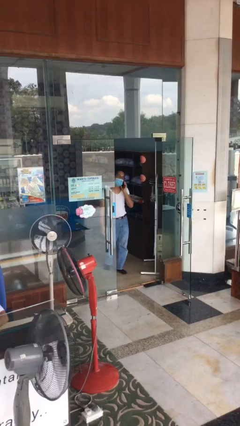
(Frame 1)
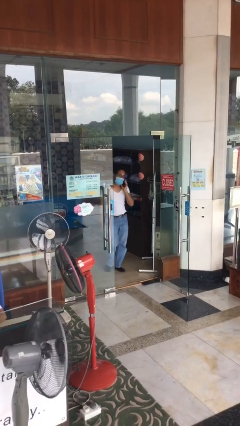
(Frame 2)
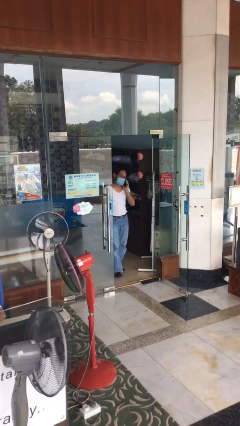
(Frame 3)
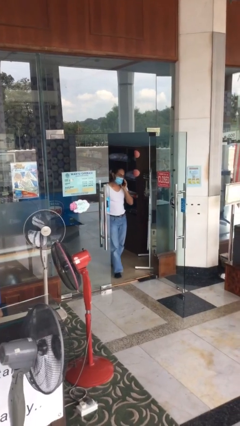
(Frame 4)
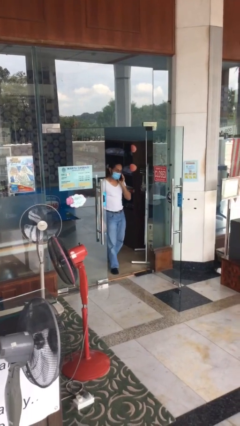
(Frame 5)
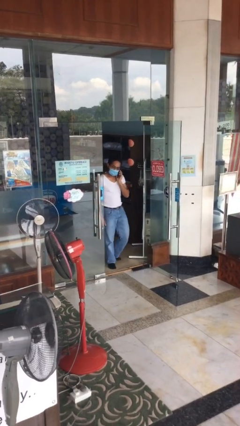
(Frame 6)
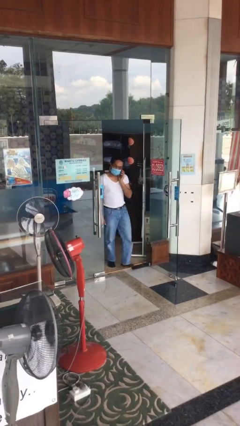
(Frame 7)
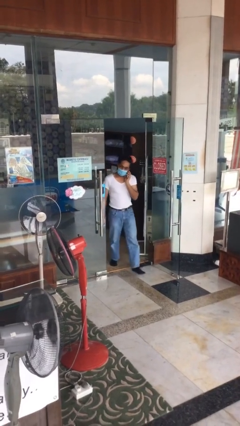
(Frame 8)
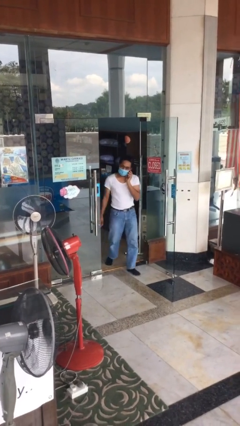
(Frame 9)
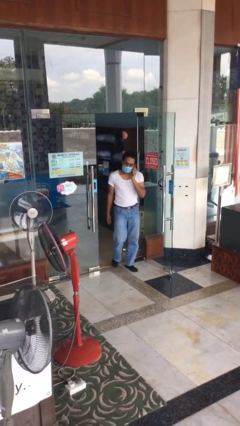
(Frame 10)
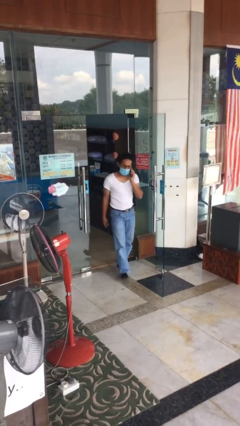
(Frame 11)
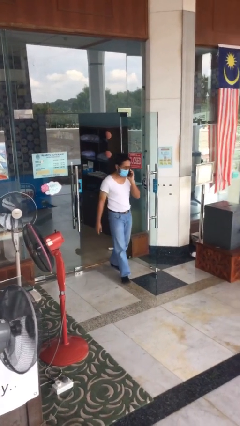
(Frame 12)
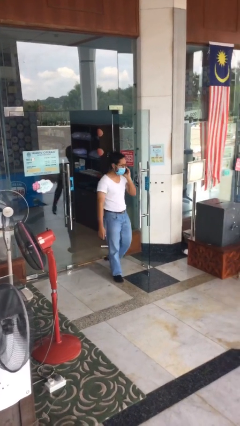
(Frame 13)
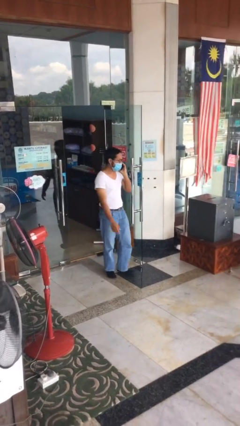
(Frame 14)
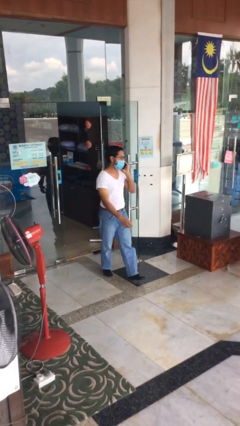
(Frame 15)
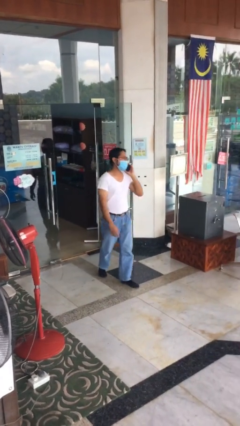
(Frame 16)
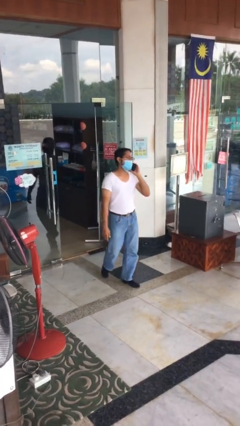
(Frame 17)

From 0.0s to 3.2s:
person enters scene through structure

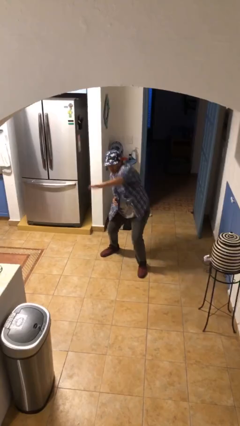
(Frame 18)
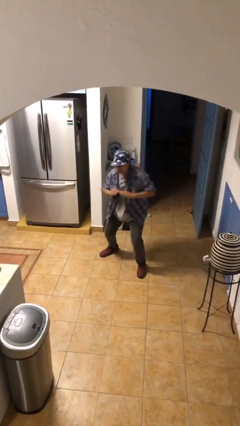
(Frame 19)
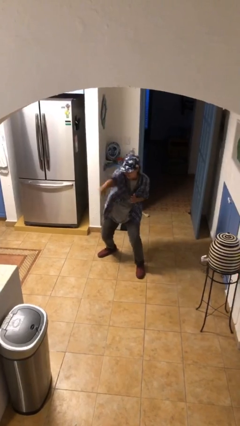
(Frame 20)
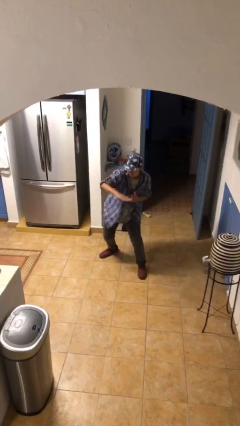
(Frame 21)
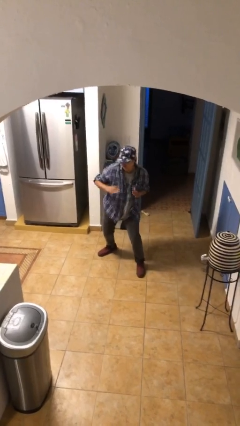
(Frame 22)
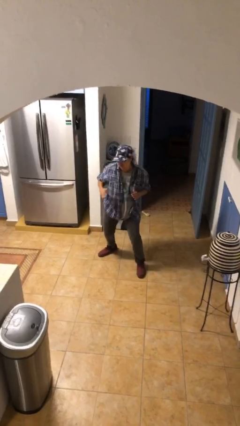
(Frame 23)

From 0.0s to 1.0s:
person karate chop

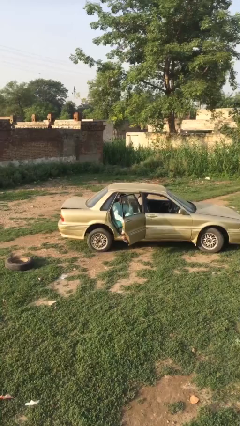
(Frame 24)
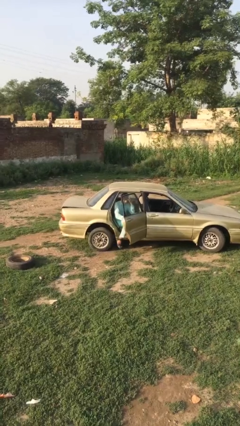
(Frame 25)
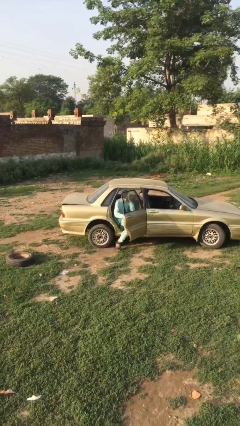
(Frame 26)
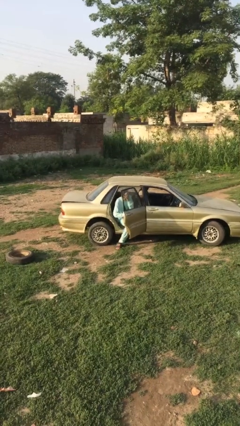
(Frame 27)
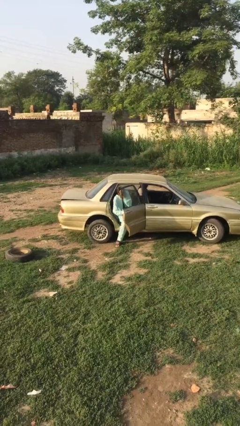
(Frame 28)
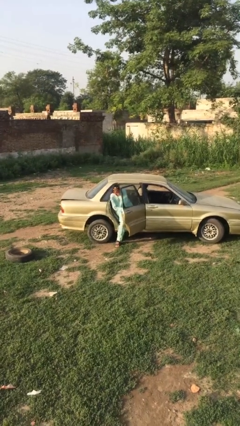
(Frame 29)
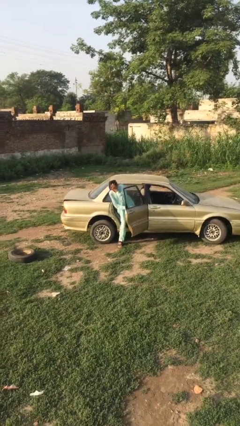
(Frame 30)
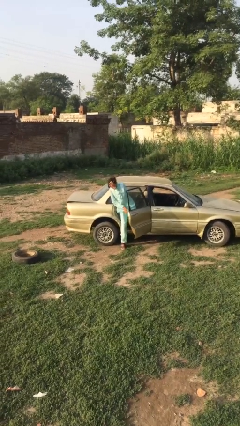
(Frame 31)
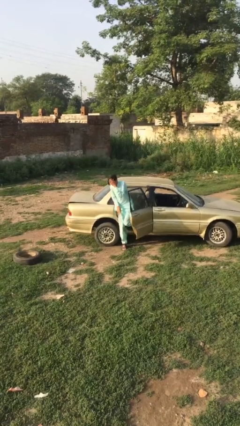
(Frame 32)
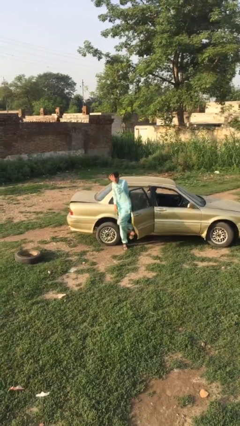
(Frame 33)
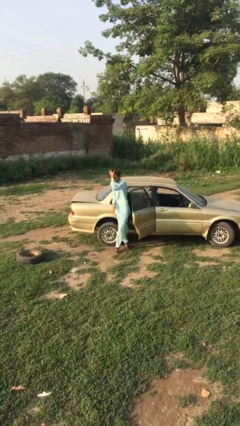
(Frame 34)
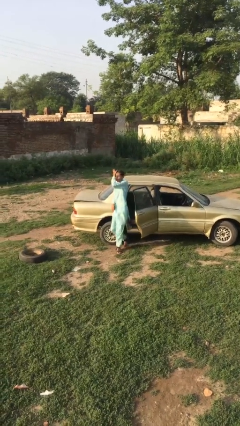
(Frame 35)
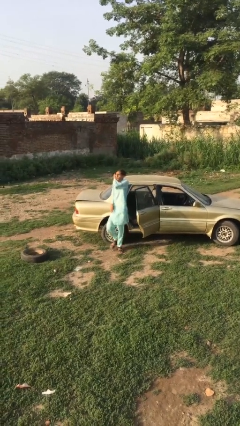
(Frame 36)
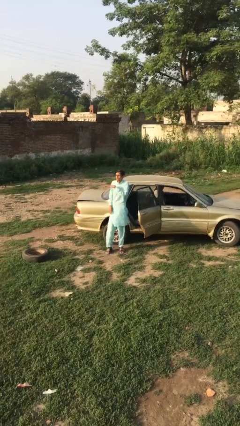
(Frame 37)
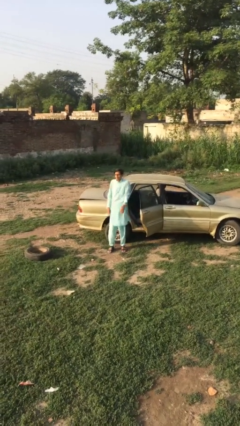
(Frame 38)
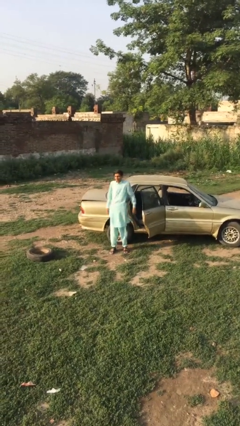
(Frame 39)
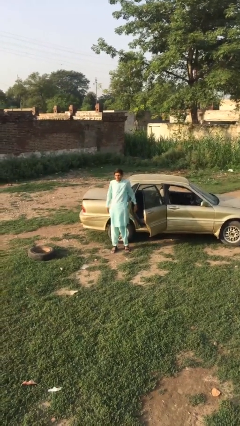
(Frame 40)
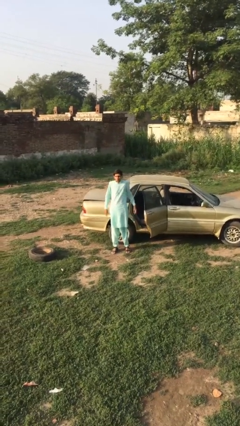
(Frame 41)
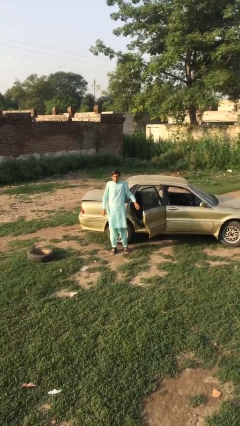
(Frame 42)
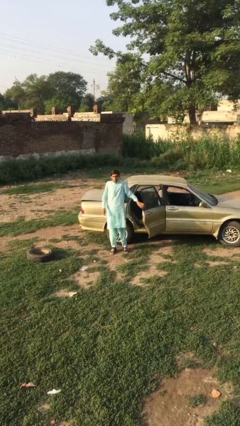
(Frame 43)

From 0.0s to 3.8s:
person exits car

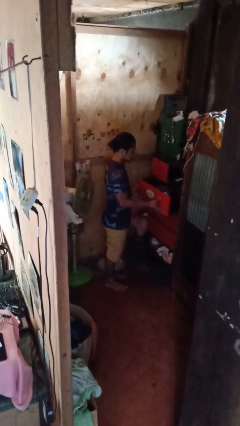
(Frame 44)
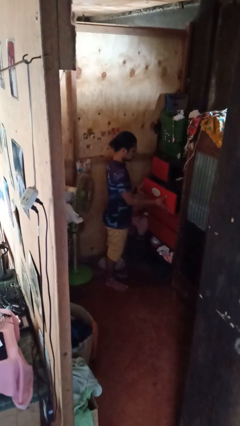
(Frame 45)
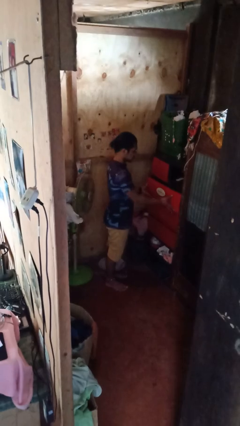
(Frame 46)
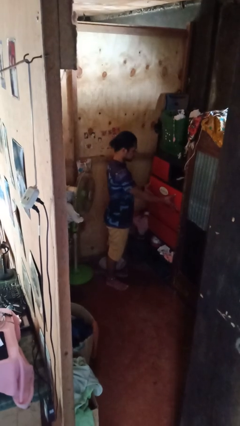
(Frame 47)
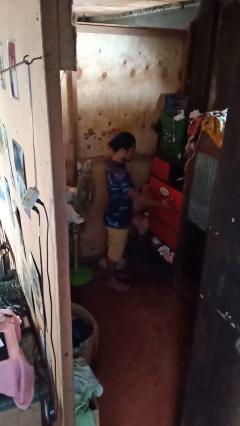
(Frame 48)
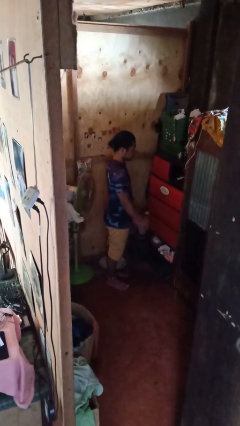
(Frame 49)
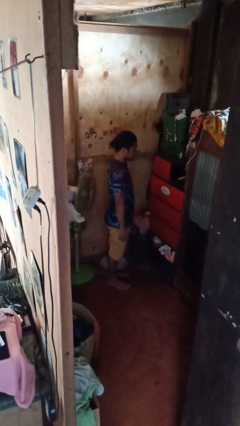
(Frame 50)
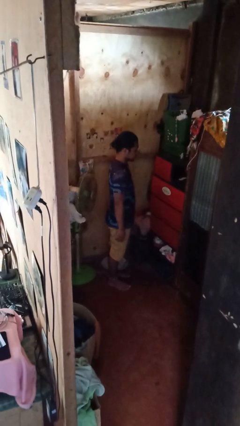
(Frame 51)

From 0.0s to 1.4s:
person closes dresser drawer

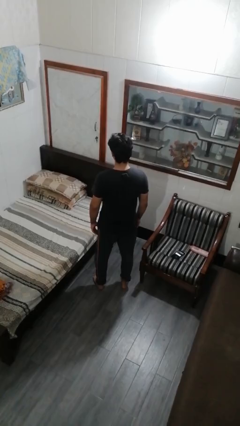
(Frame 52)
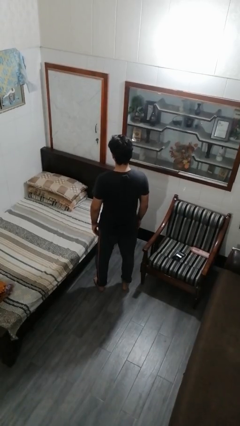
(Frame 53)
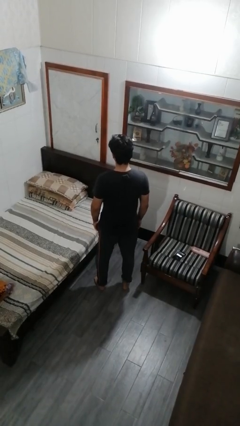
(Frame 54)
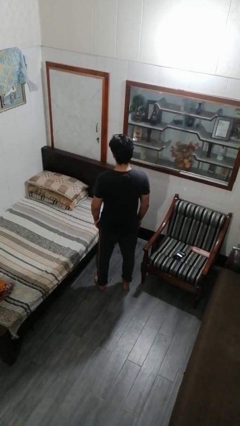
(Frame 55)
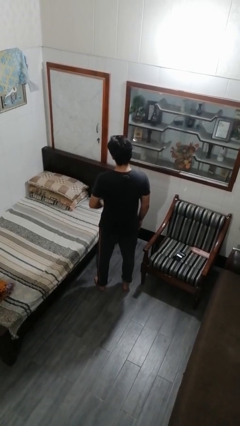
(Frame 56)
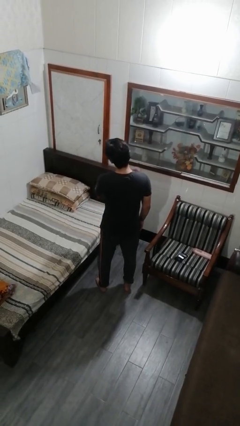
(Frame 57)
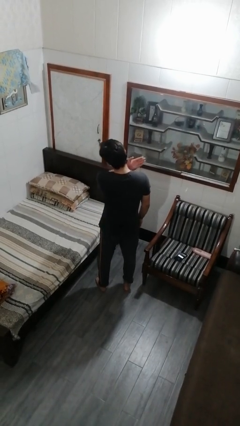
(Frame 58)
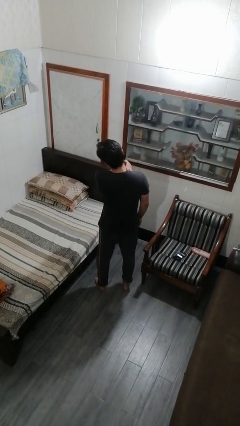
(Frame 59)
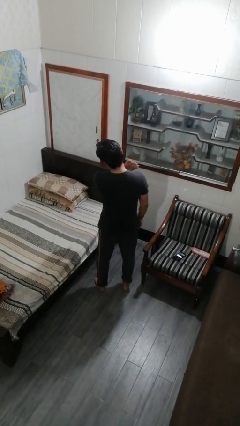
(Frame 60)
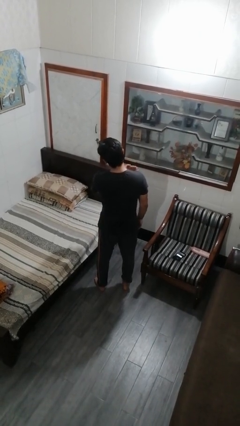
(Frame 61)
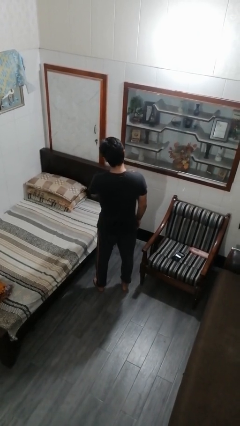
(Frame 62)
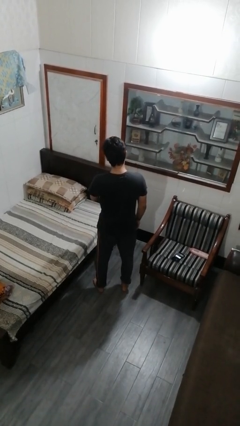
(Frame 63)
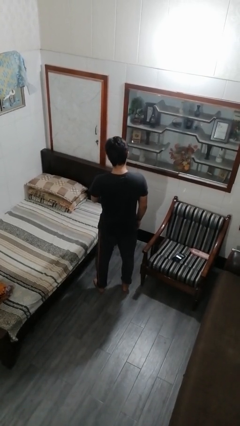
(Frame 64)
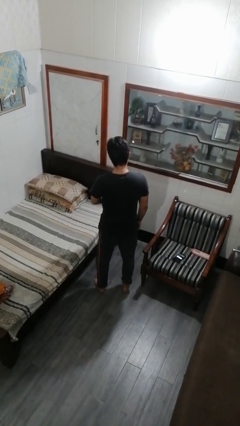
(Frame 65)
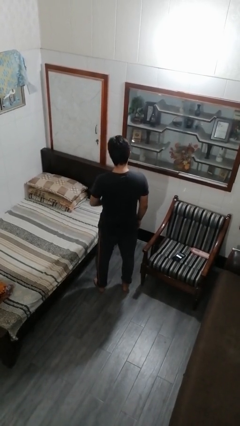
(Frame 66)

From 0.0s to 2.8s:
person swats bug

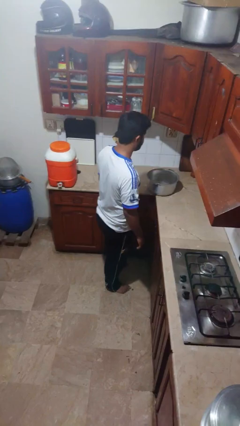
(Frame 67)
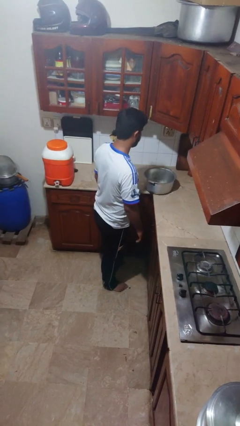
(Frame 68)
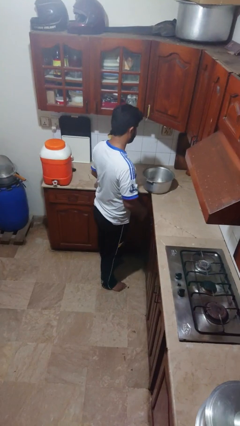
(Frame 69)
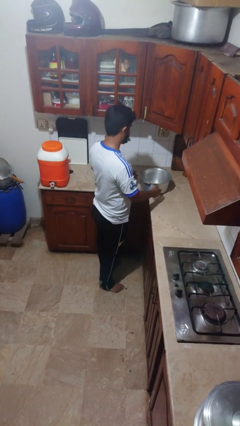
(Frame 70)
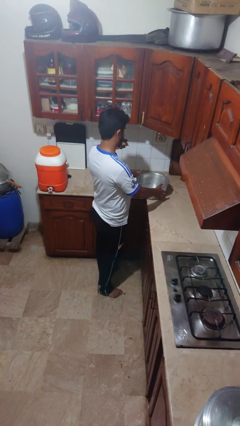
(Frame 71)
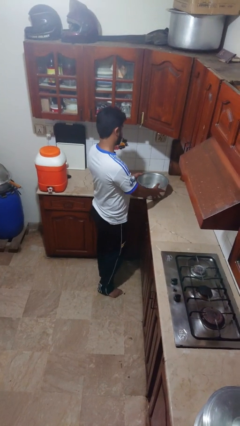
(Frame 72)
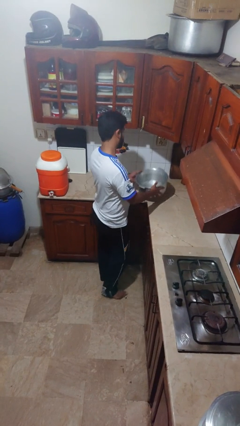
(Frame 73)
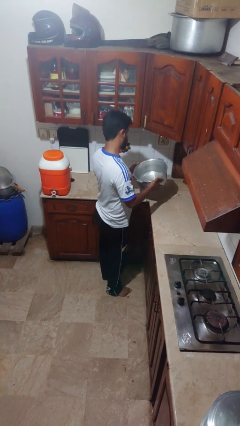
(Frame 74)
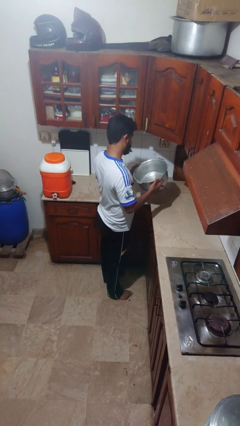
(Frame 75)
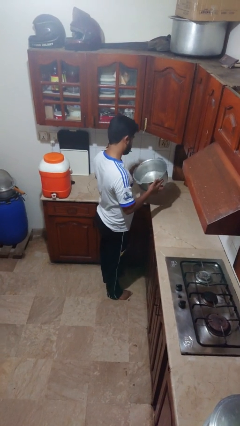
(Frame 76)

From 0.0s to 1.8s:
person picks up object from countertop

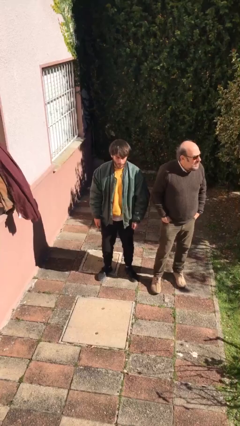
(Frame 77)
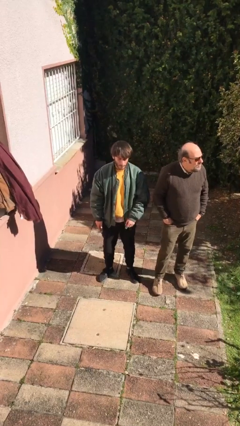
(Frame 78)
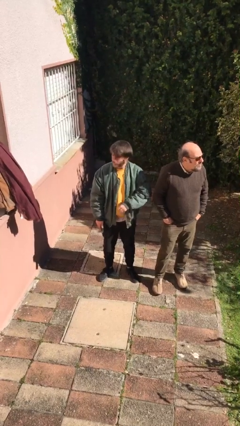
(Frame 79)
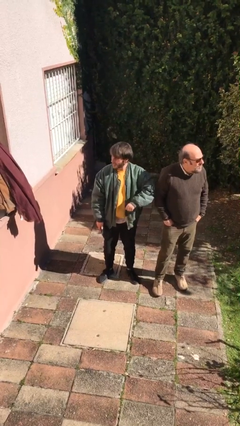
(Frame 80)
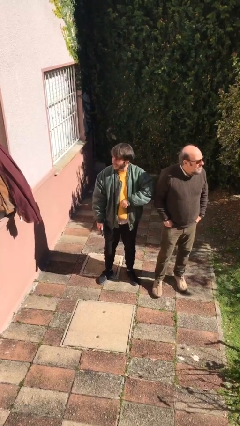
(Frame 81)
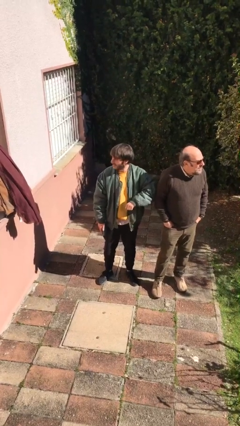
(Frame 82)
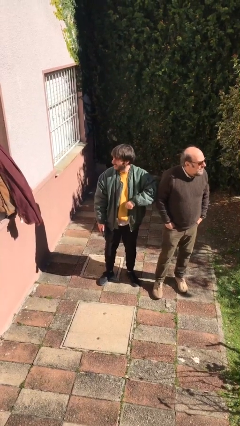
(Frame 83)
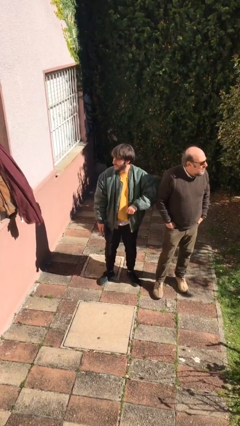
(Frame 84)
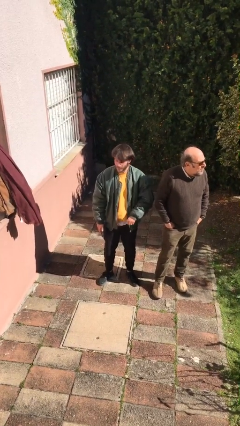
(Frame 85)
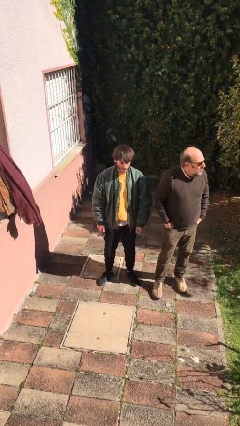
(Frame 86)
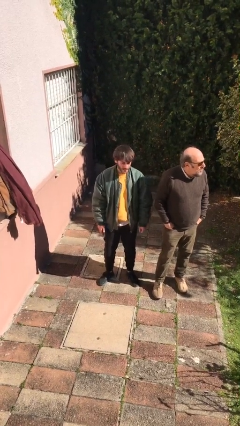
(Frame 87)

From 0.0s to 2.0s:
person nudges person with elbow

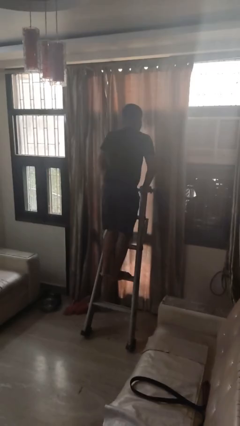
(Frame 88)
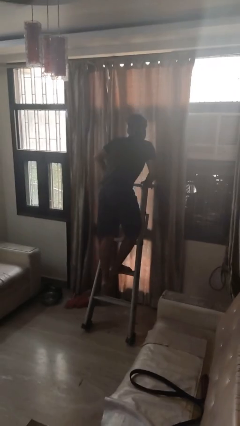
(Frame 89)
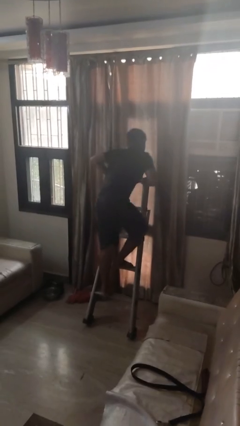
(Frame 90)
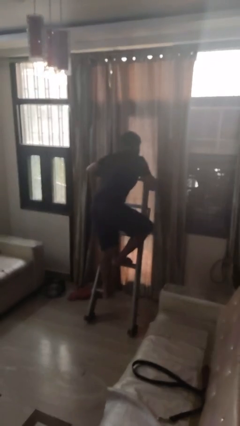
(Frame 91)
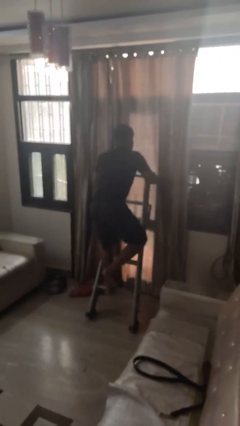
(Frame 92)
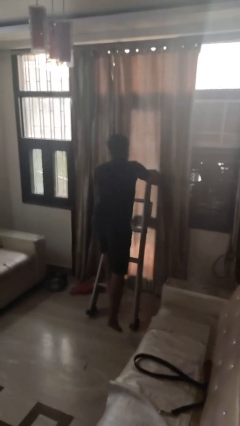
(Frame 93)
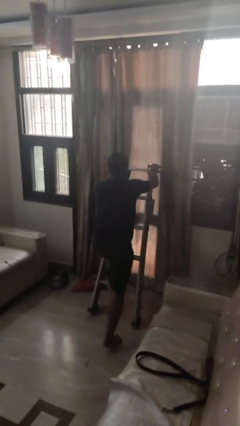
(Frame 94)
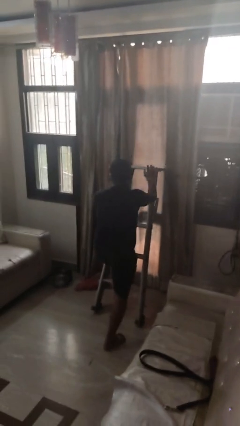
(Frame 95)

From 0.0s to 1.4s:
person climbs down ladder
